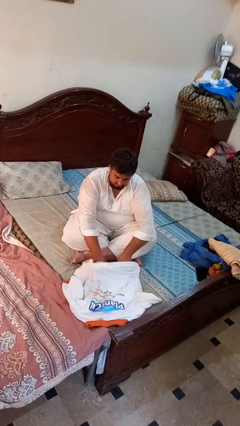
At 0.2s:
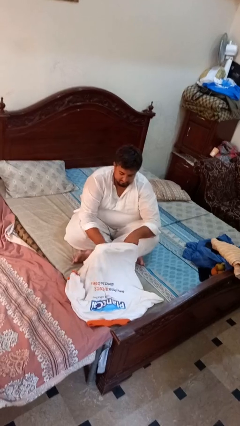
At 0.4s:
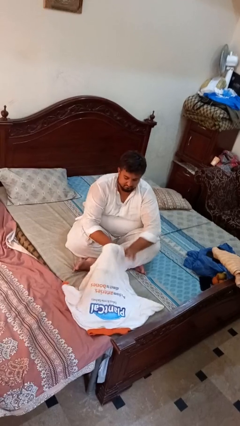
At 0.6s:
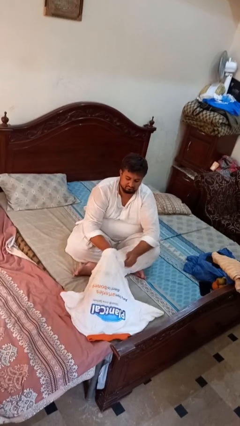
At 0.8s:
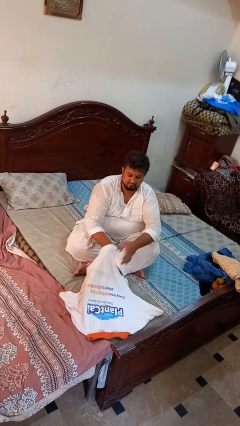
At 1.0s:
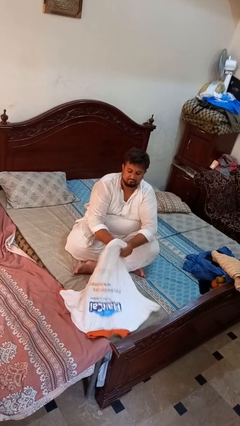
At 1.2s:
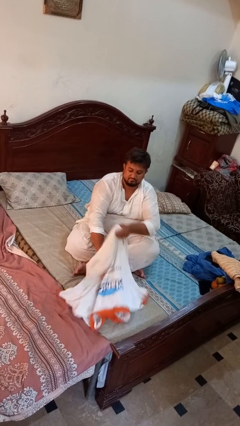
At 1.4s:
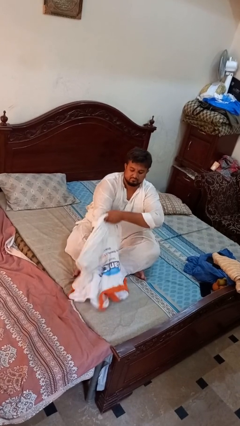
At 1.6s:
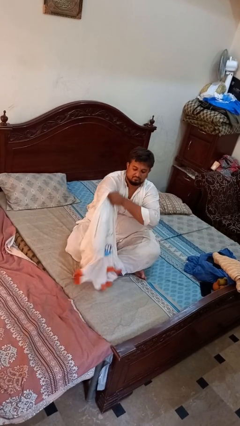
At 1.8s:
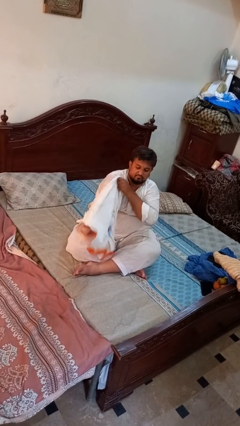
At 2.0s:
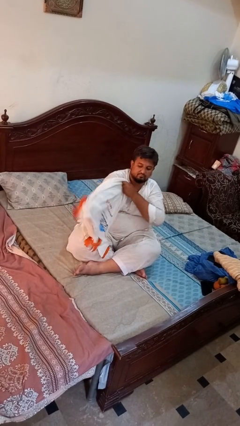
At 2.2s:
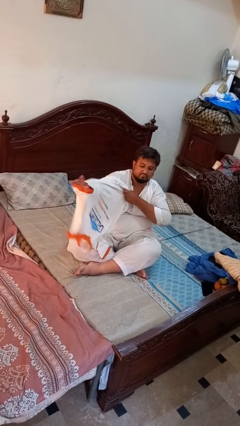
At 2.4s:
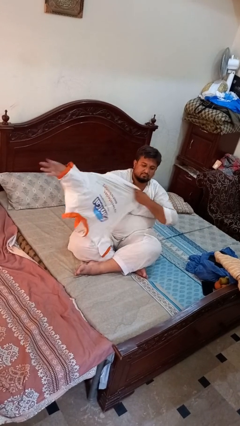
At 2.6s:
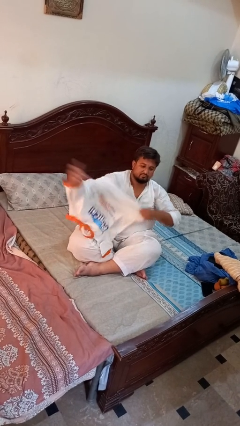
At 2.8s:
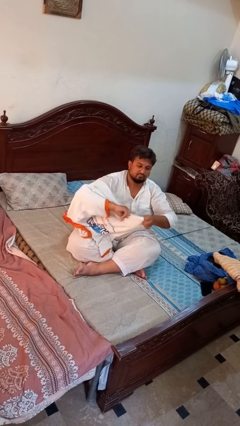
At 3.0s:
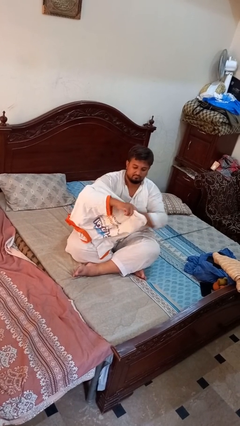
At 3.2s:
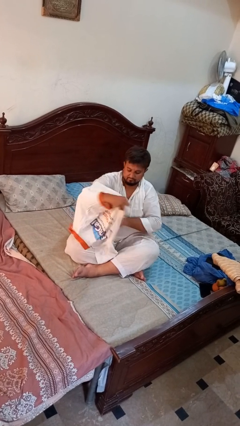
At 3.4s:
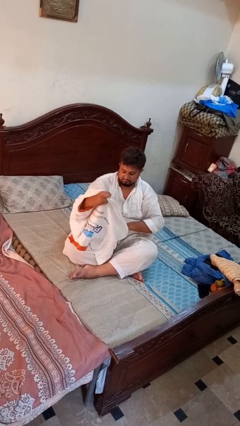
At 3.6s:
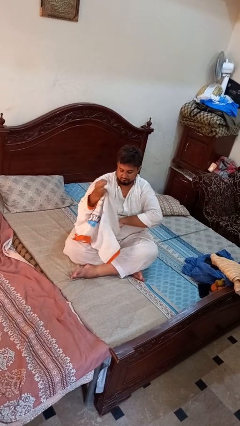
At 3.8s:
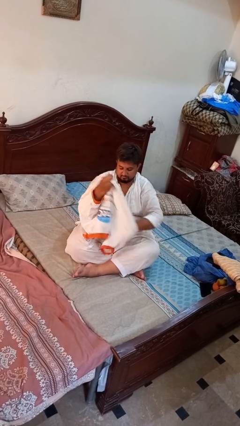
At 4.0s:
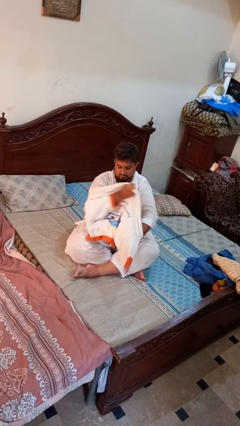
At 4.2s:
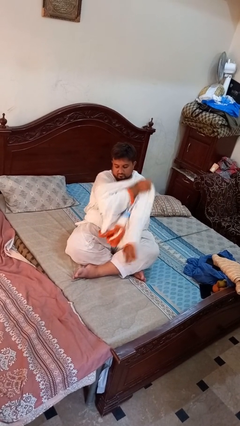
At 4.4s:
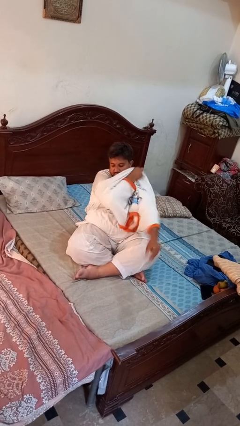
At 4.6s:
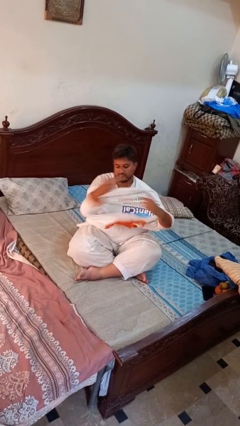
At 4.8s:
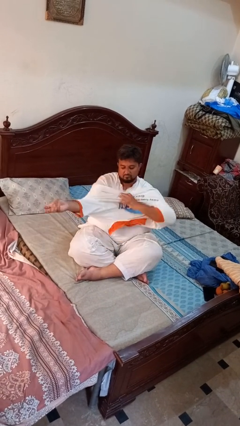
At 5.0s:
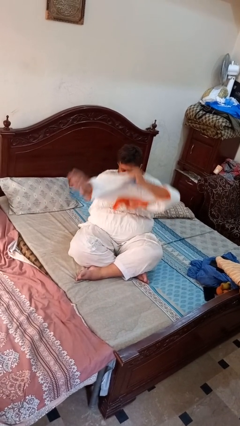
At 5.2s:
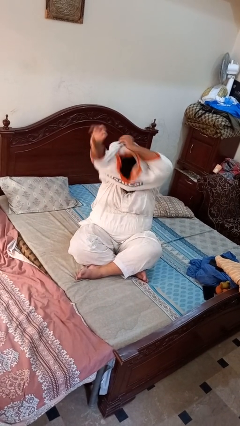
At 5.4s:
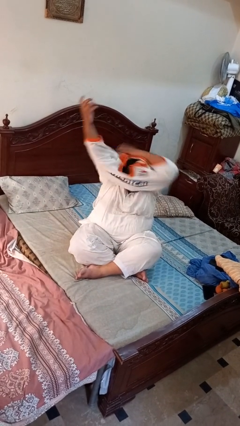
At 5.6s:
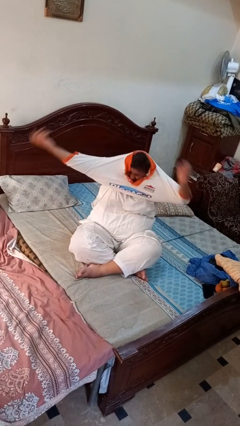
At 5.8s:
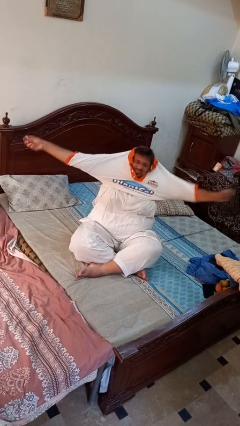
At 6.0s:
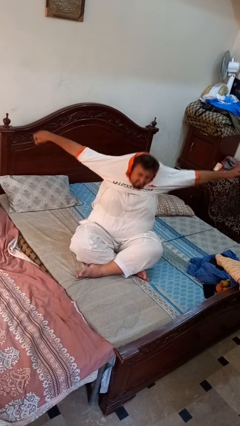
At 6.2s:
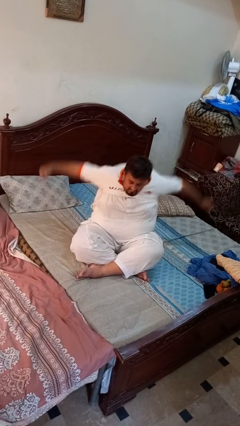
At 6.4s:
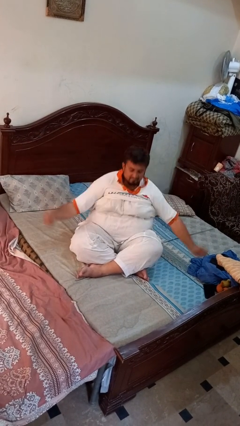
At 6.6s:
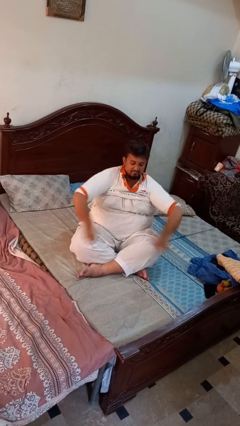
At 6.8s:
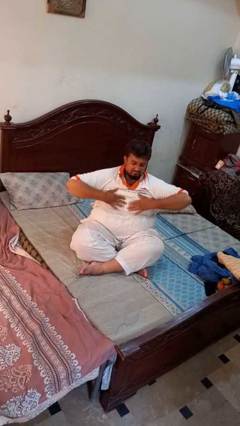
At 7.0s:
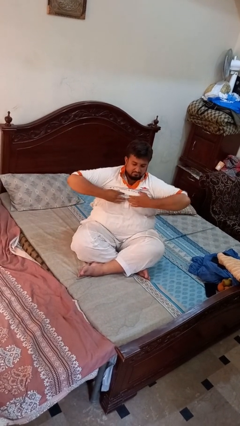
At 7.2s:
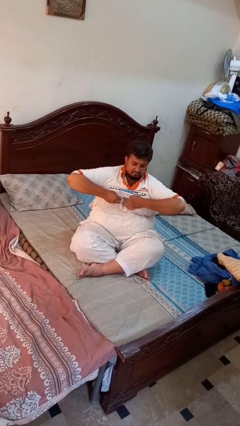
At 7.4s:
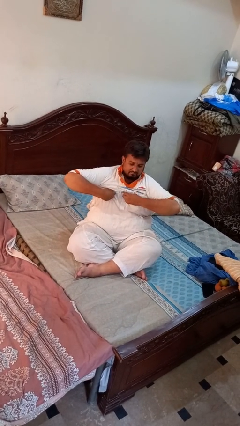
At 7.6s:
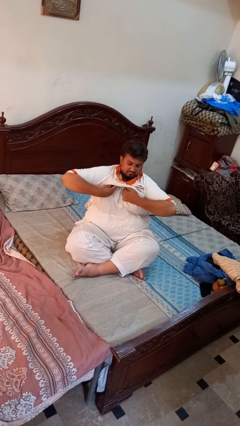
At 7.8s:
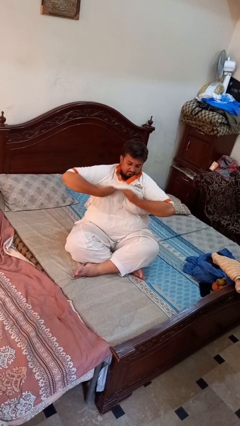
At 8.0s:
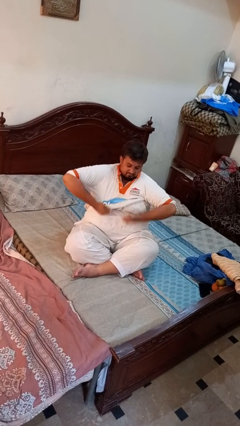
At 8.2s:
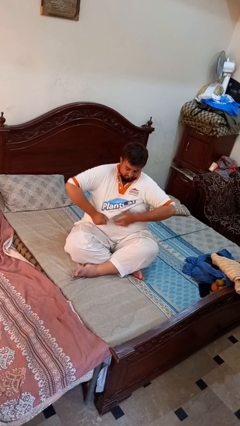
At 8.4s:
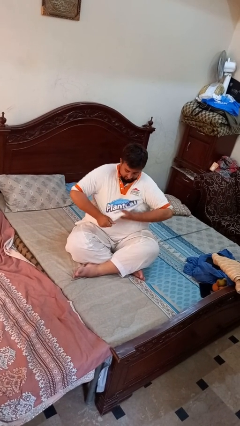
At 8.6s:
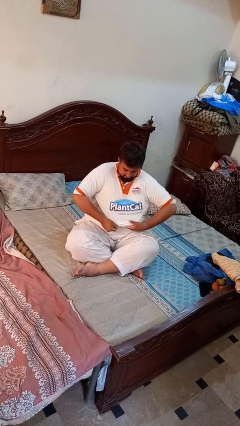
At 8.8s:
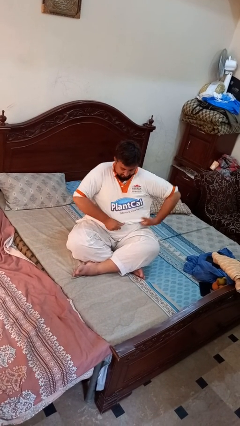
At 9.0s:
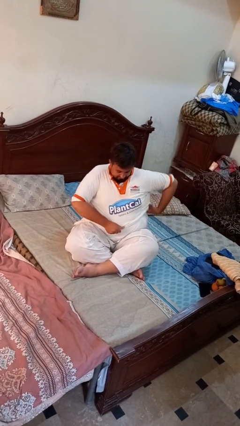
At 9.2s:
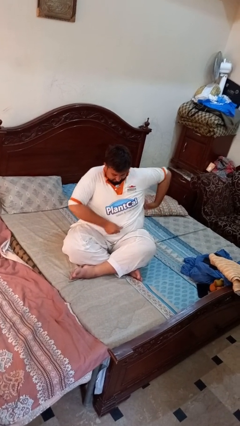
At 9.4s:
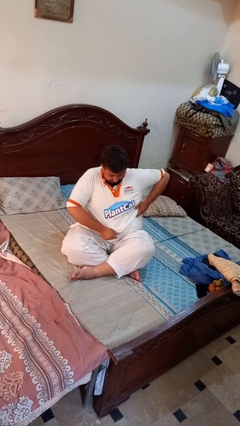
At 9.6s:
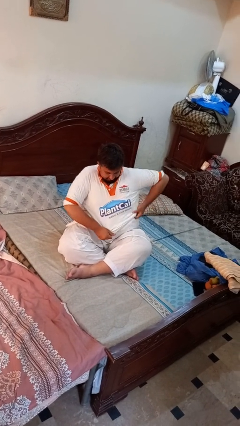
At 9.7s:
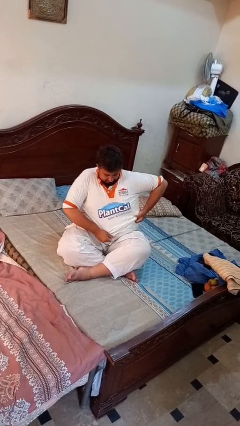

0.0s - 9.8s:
person puts on shirt

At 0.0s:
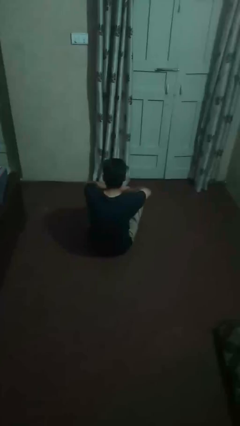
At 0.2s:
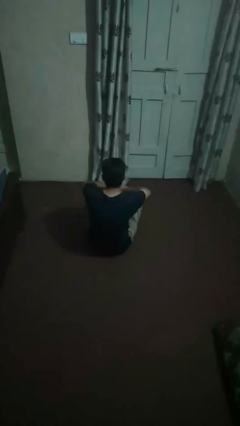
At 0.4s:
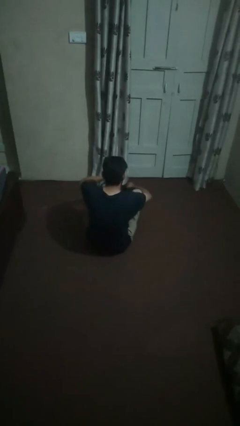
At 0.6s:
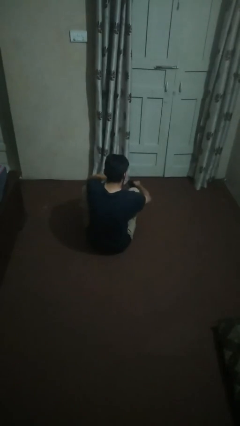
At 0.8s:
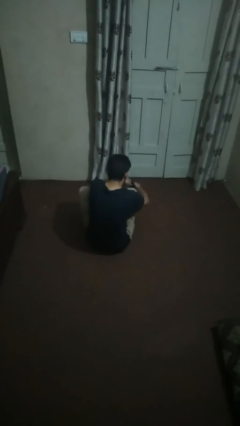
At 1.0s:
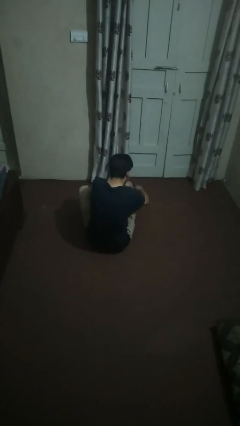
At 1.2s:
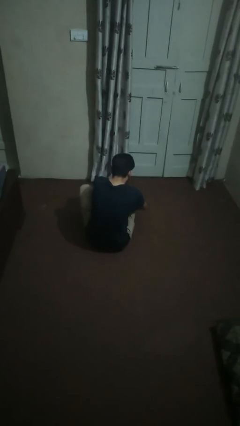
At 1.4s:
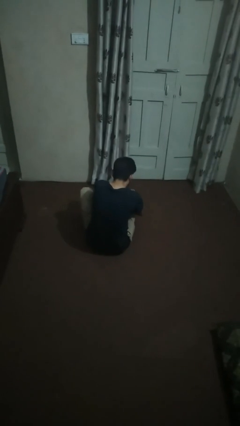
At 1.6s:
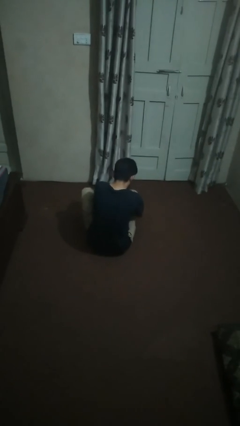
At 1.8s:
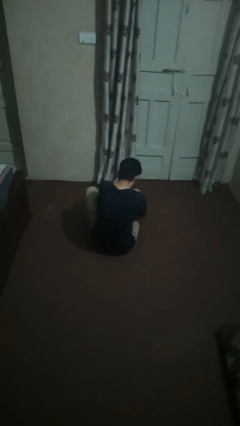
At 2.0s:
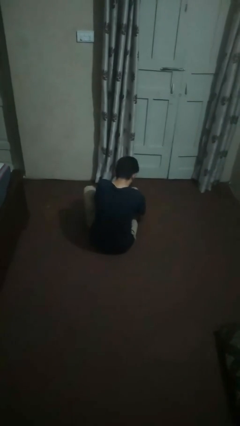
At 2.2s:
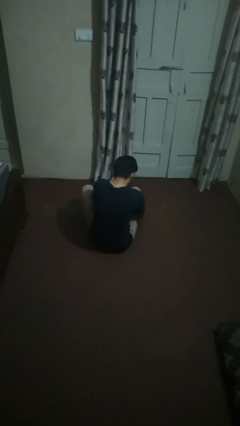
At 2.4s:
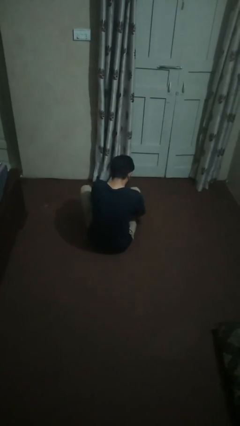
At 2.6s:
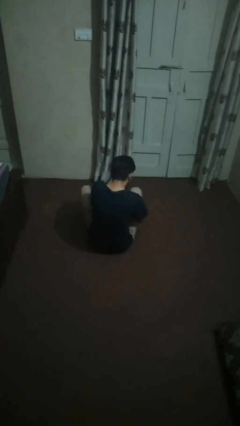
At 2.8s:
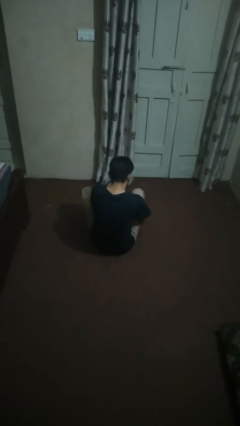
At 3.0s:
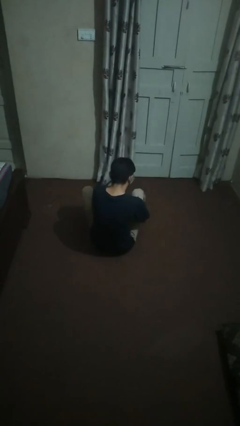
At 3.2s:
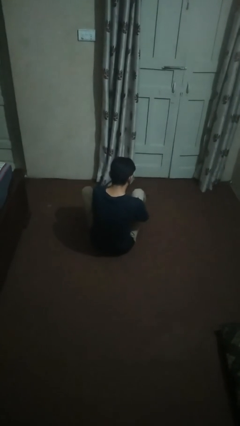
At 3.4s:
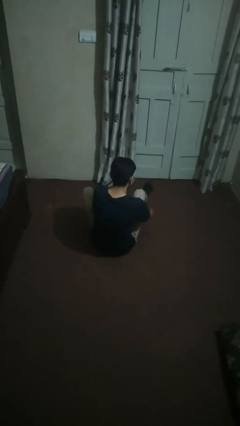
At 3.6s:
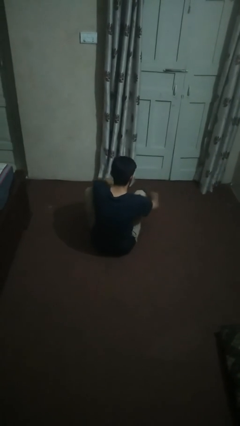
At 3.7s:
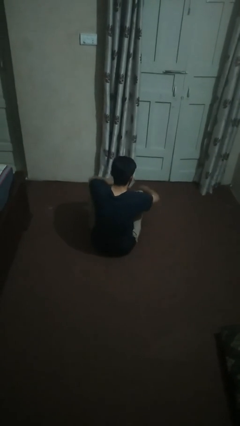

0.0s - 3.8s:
person puts on socks

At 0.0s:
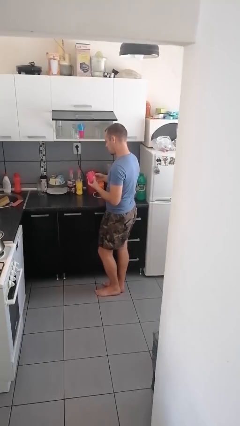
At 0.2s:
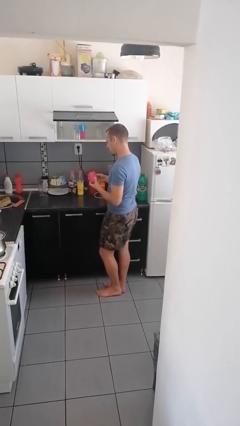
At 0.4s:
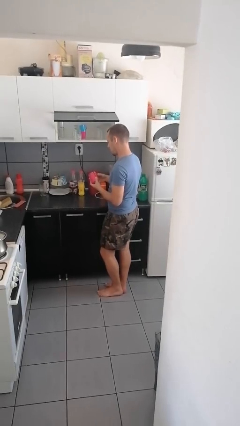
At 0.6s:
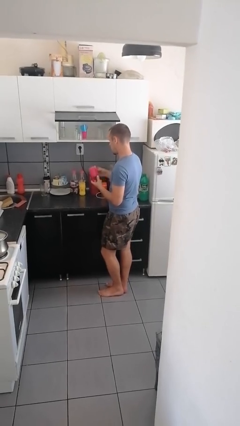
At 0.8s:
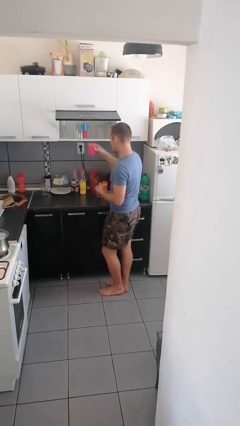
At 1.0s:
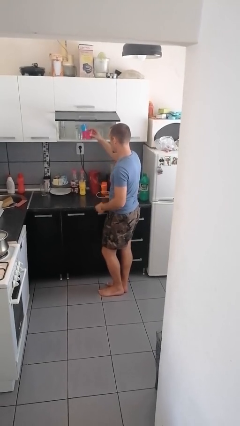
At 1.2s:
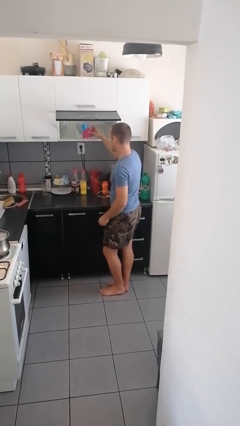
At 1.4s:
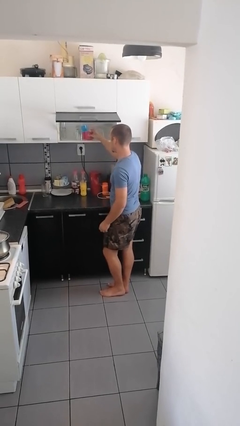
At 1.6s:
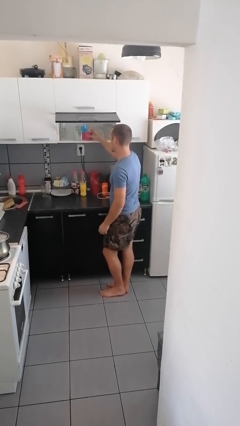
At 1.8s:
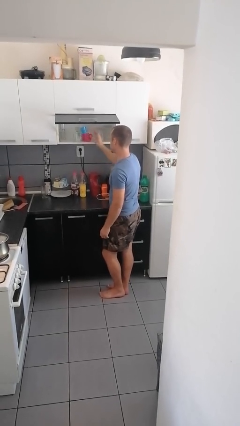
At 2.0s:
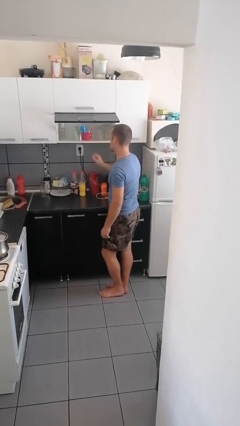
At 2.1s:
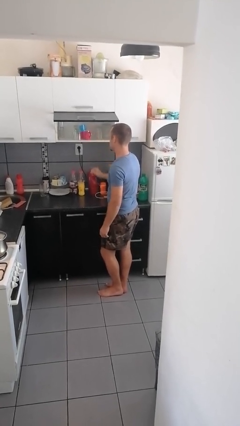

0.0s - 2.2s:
person puts down object into cabinet

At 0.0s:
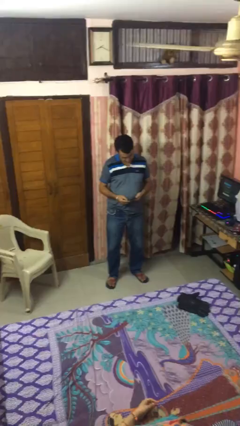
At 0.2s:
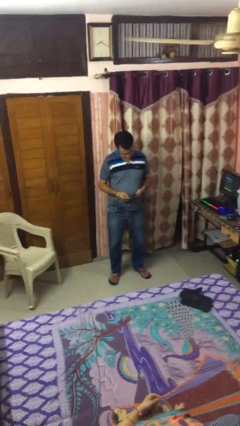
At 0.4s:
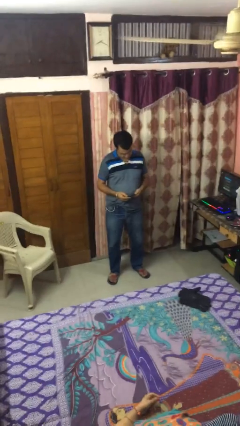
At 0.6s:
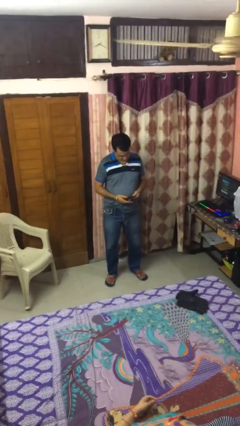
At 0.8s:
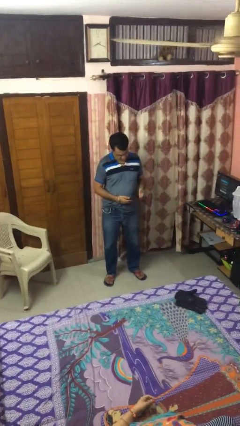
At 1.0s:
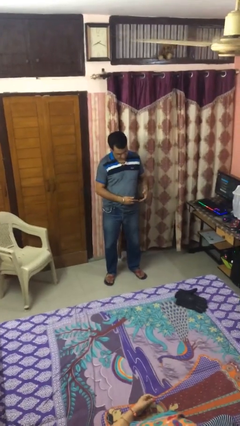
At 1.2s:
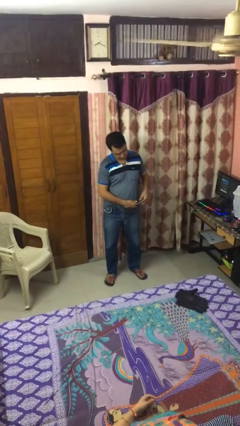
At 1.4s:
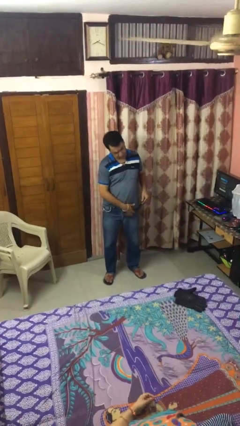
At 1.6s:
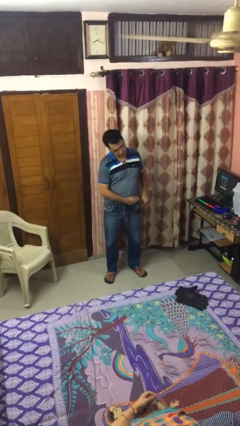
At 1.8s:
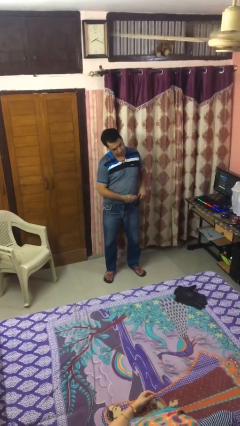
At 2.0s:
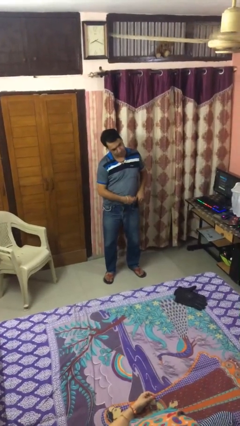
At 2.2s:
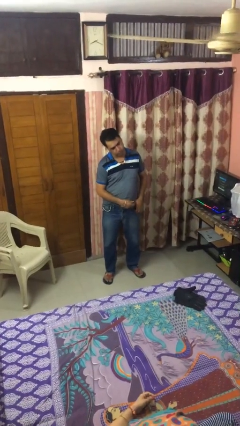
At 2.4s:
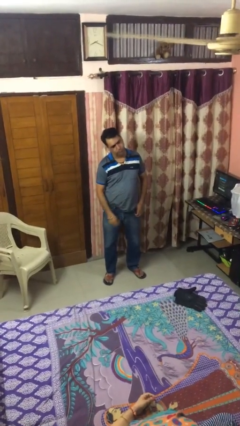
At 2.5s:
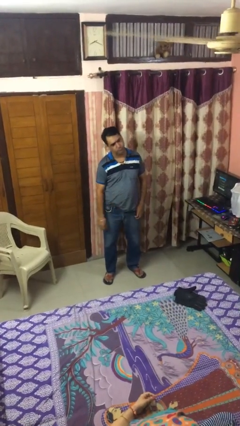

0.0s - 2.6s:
person puts phone into pocket
